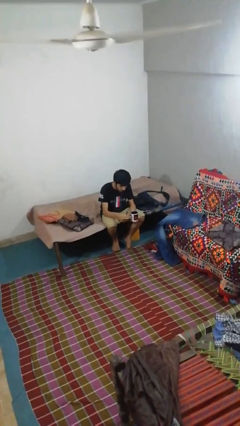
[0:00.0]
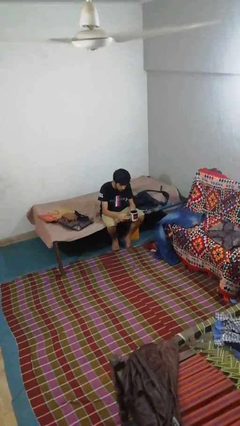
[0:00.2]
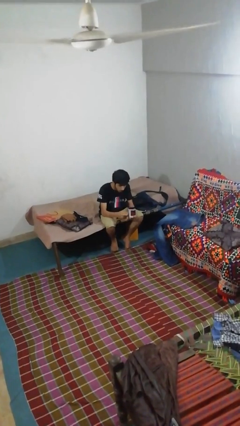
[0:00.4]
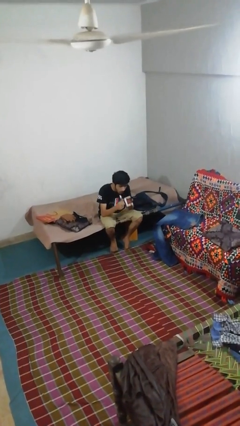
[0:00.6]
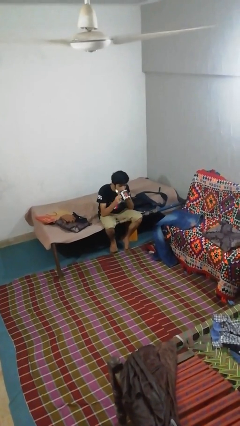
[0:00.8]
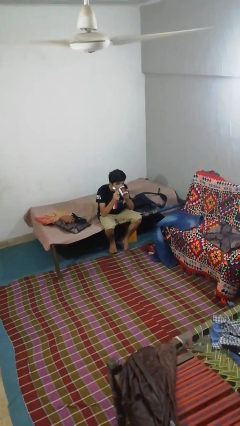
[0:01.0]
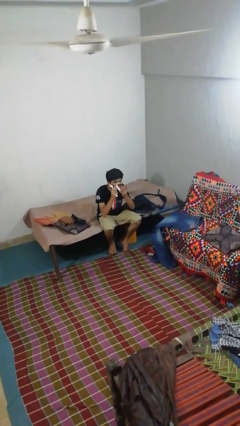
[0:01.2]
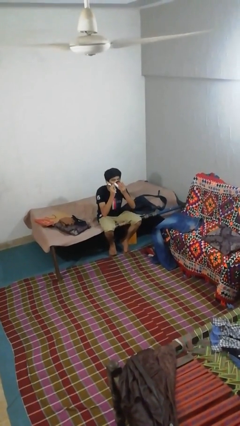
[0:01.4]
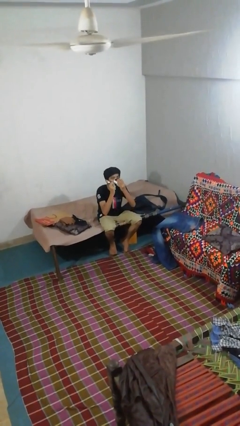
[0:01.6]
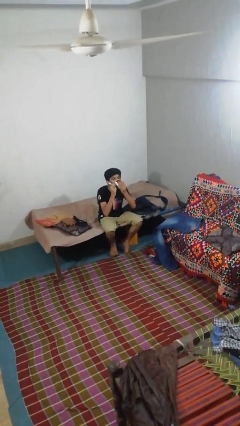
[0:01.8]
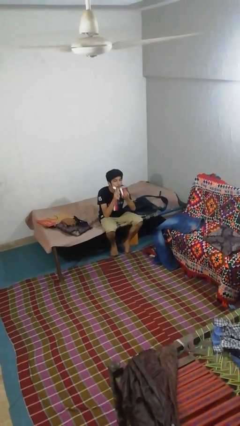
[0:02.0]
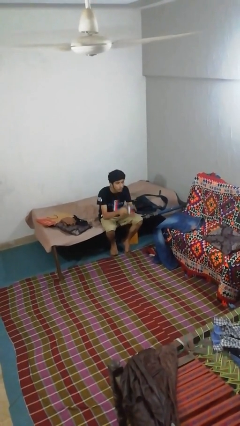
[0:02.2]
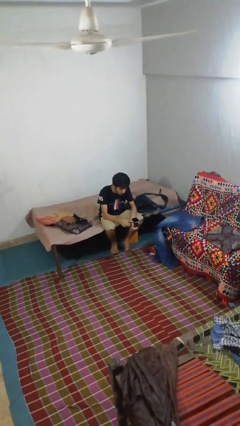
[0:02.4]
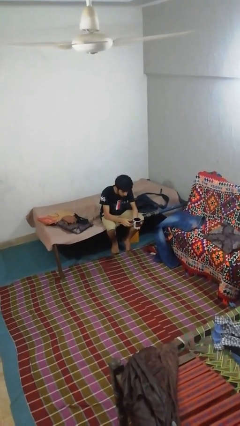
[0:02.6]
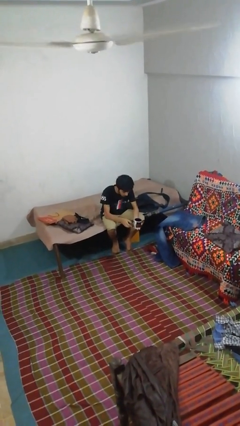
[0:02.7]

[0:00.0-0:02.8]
person drinks from mug

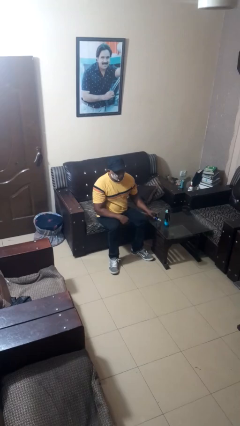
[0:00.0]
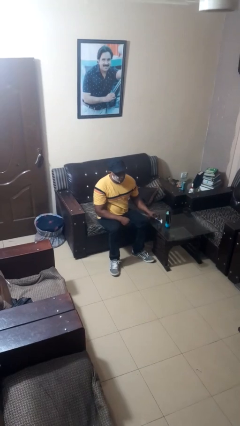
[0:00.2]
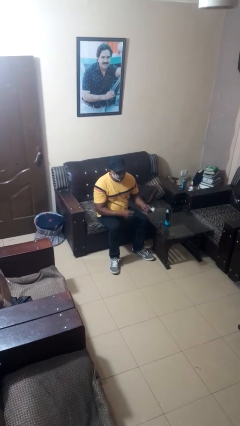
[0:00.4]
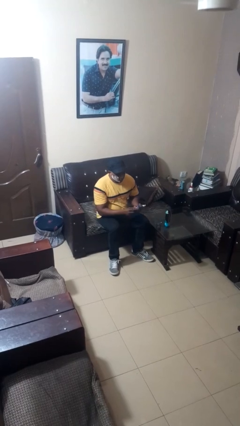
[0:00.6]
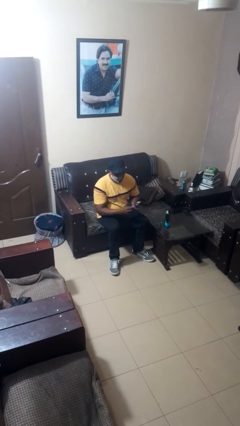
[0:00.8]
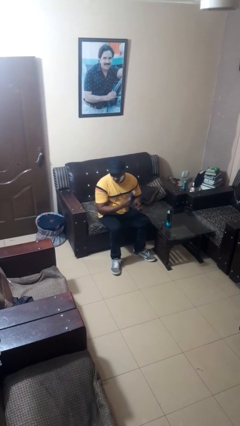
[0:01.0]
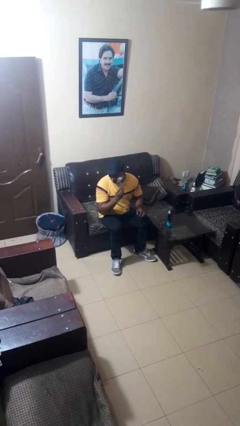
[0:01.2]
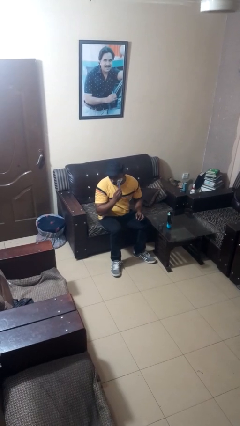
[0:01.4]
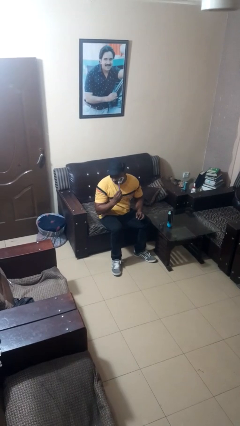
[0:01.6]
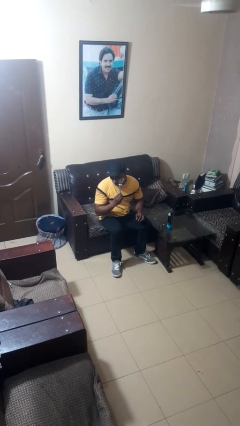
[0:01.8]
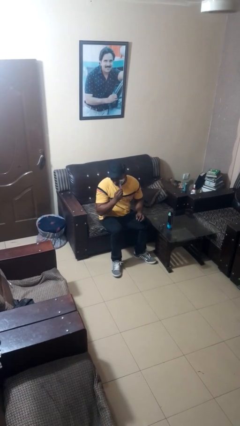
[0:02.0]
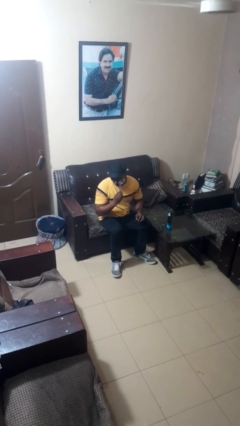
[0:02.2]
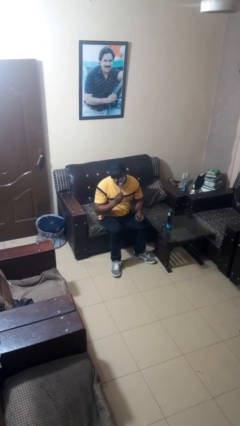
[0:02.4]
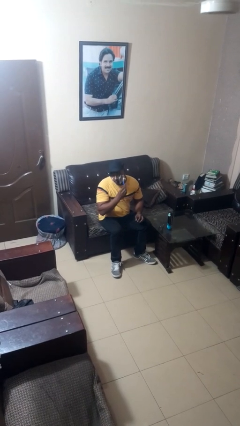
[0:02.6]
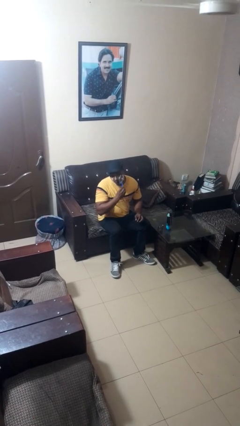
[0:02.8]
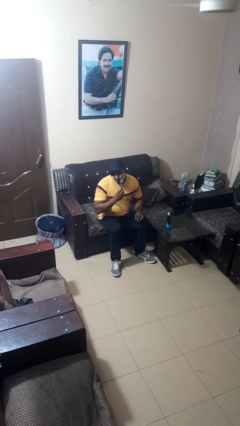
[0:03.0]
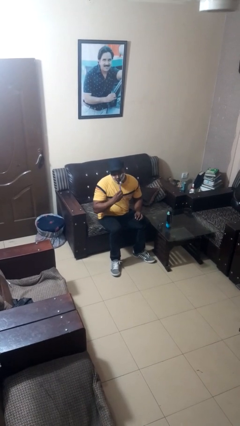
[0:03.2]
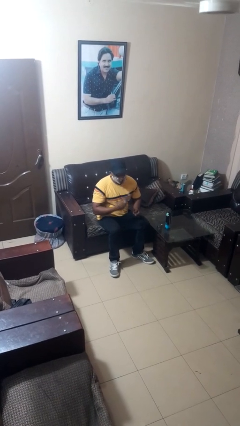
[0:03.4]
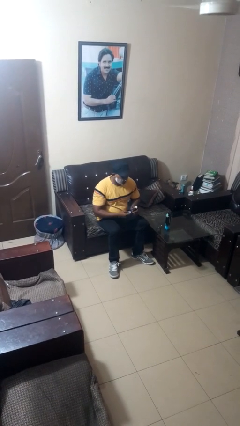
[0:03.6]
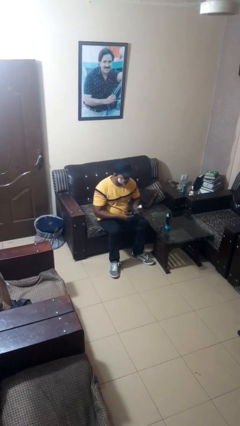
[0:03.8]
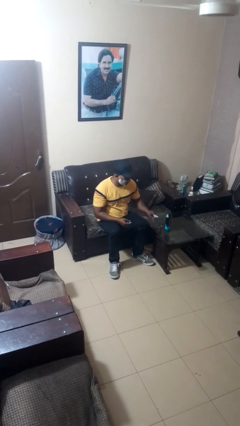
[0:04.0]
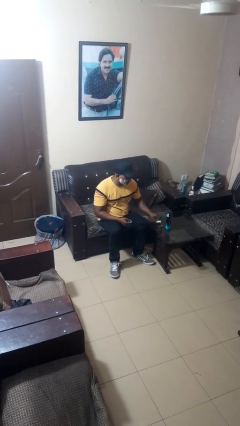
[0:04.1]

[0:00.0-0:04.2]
person shaves face

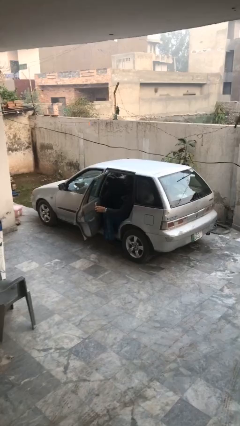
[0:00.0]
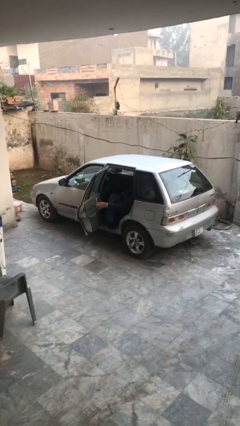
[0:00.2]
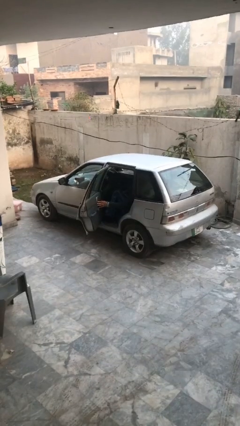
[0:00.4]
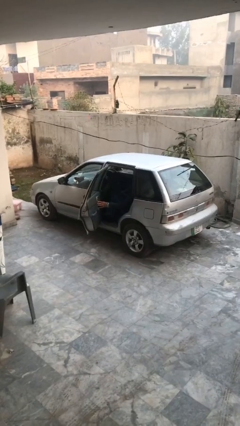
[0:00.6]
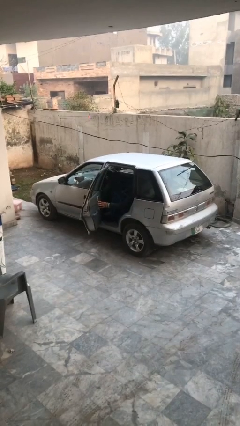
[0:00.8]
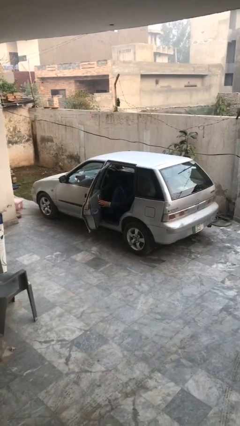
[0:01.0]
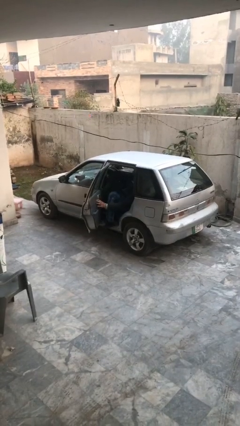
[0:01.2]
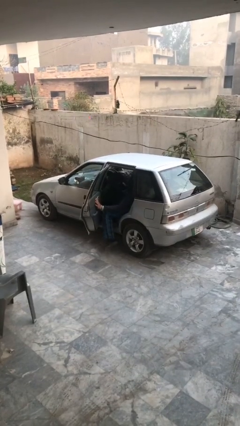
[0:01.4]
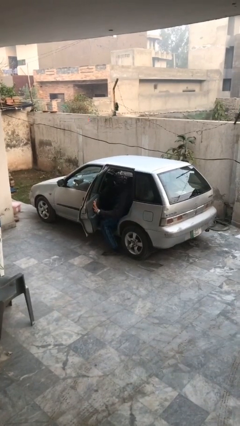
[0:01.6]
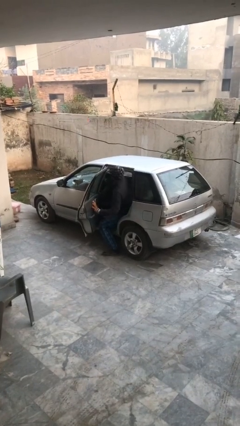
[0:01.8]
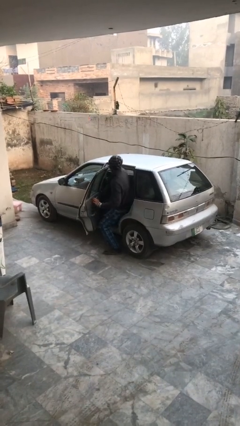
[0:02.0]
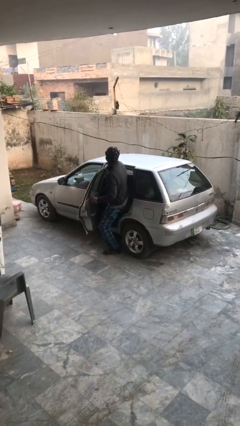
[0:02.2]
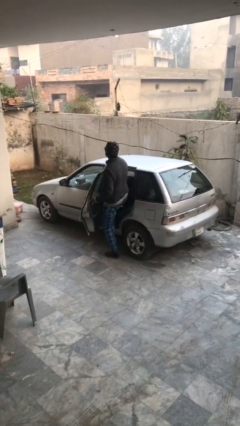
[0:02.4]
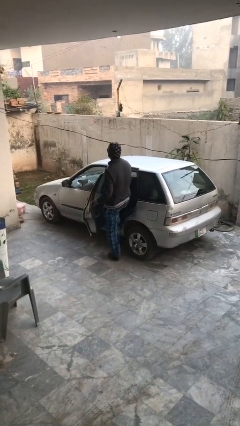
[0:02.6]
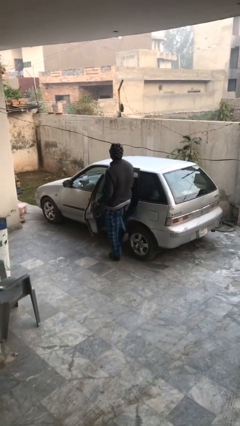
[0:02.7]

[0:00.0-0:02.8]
person exits car

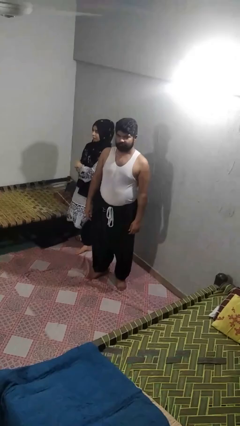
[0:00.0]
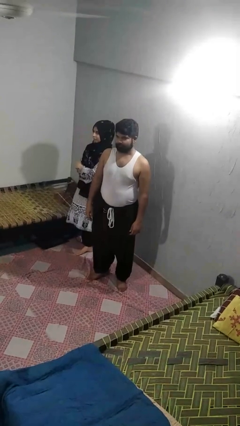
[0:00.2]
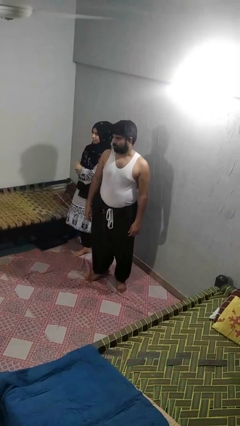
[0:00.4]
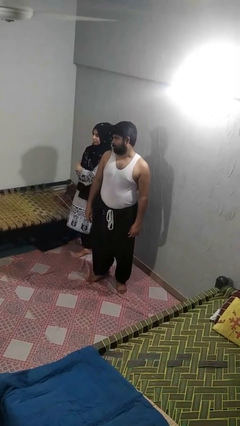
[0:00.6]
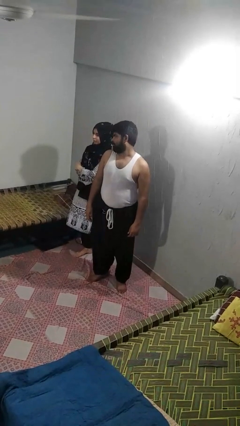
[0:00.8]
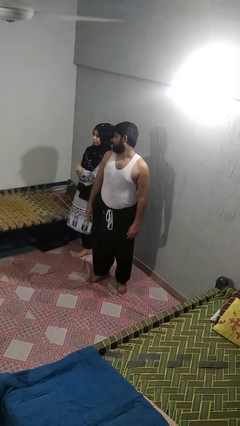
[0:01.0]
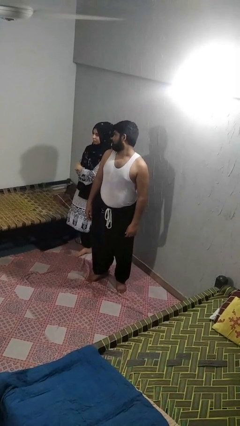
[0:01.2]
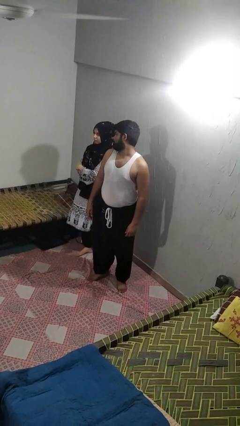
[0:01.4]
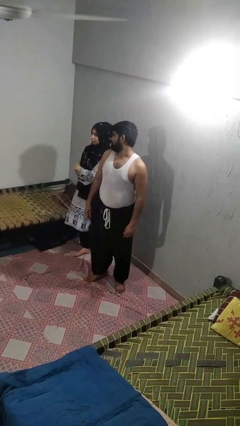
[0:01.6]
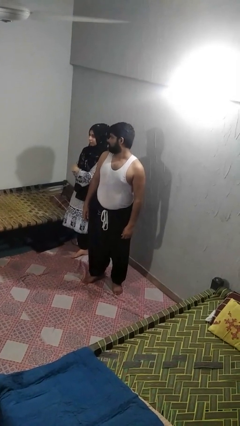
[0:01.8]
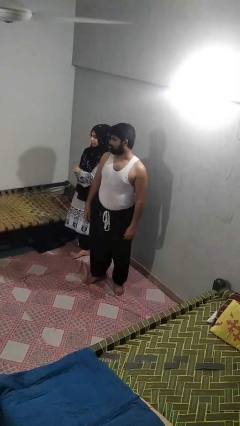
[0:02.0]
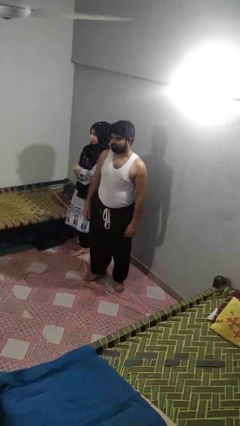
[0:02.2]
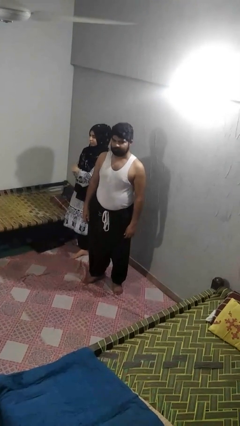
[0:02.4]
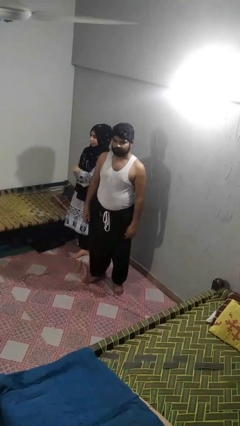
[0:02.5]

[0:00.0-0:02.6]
person looks over shoulder

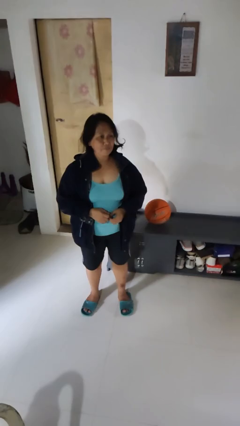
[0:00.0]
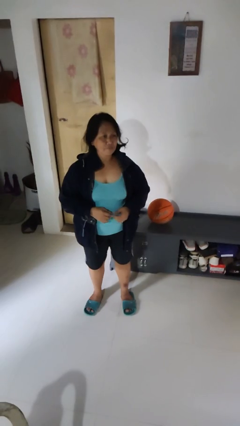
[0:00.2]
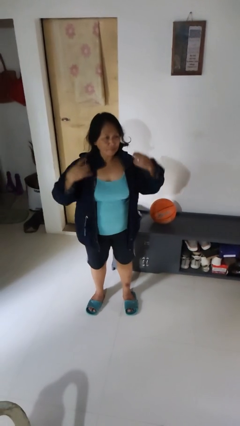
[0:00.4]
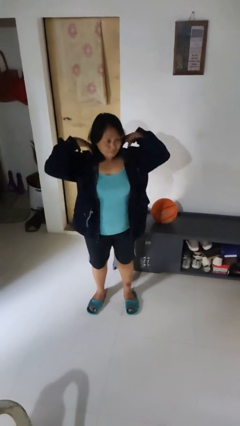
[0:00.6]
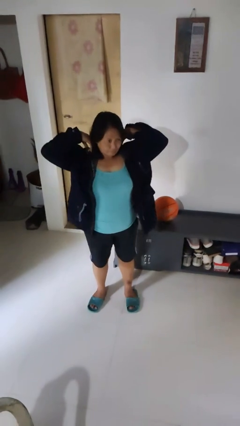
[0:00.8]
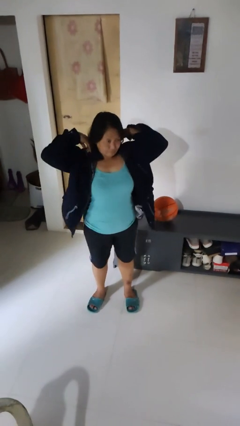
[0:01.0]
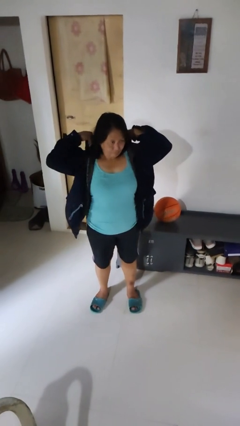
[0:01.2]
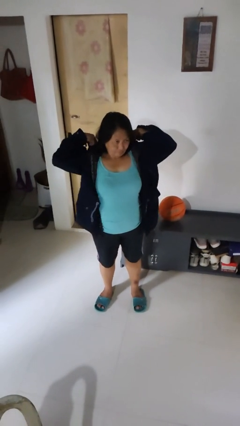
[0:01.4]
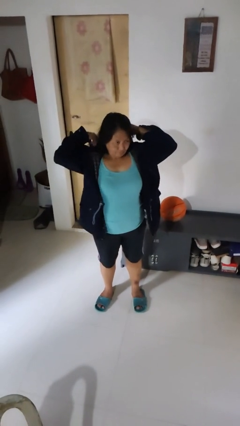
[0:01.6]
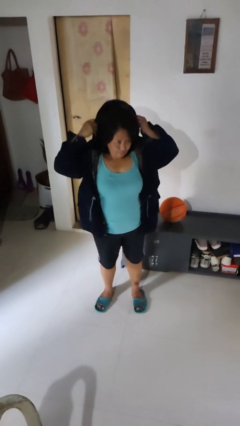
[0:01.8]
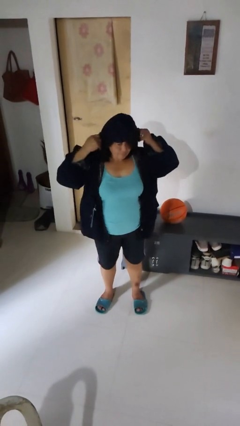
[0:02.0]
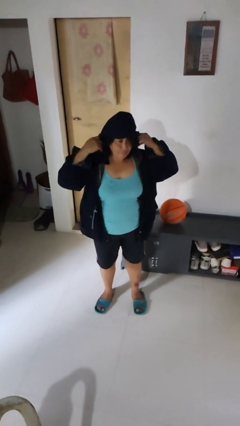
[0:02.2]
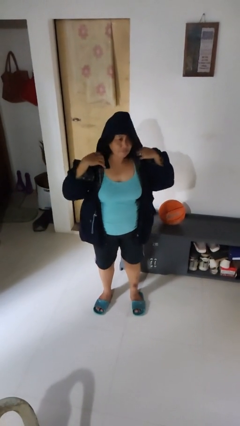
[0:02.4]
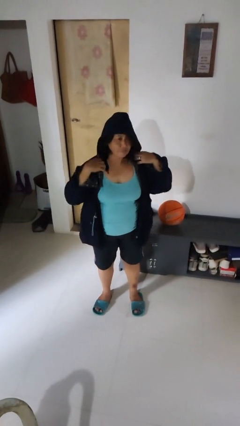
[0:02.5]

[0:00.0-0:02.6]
person puts on hoodie

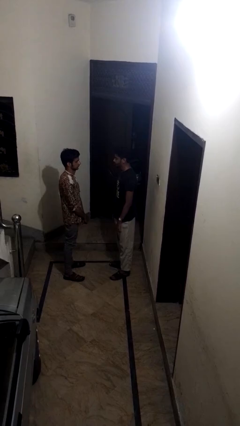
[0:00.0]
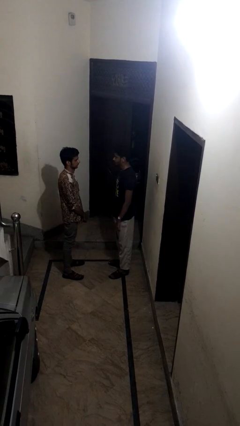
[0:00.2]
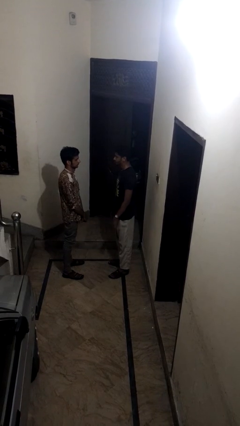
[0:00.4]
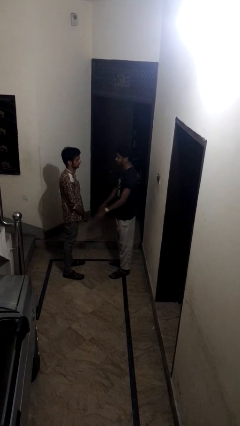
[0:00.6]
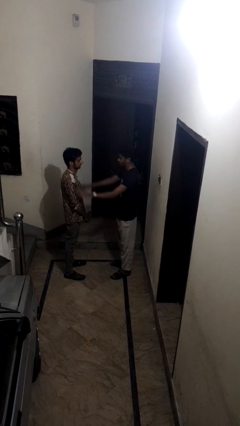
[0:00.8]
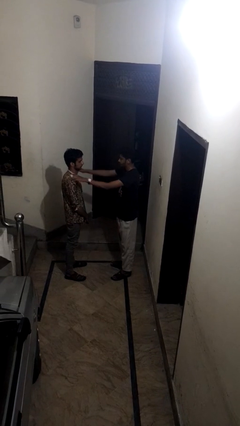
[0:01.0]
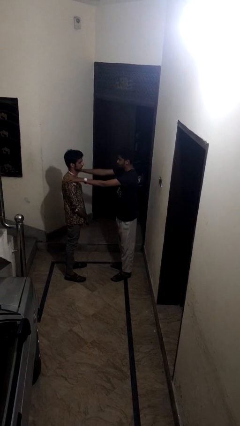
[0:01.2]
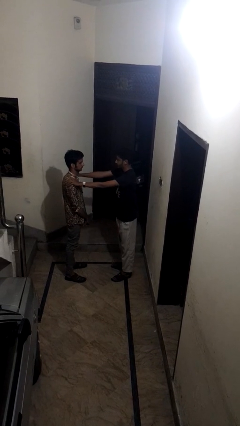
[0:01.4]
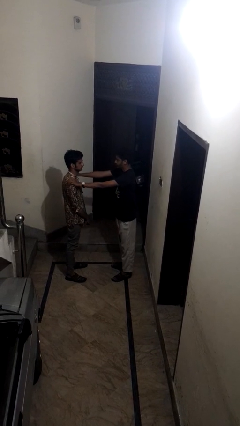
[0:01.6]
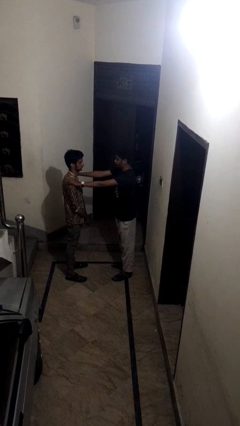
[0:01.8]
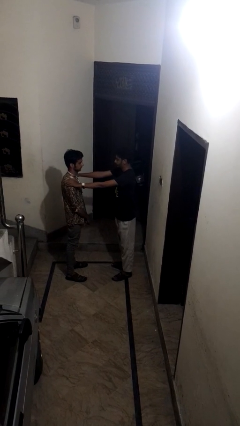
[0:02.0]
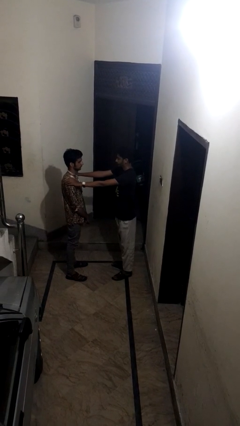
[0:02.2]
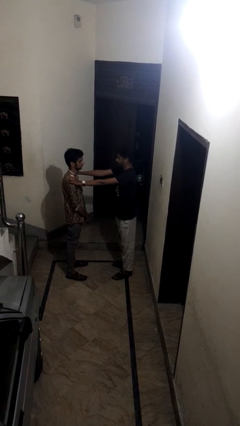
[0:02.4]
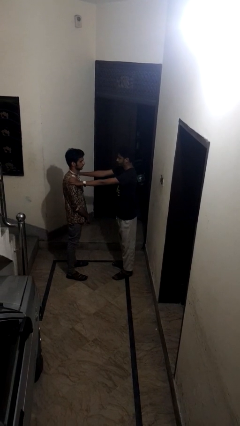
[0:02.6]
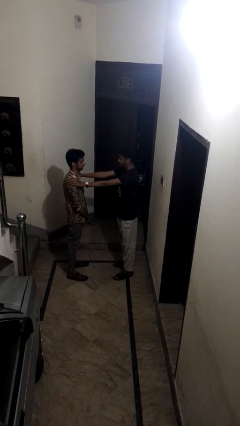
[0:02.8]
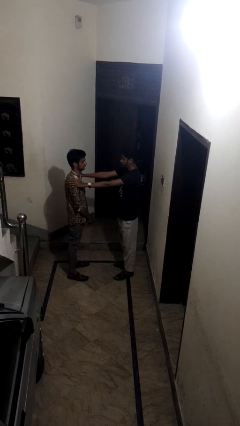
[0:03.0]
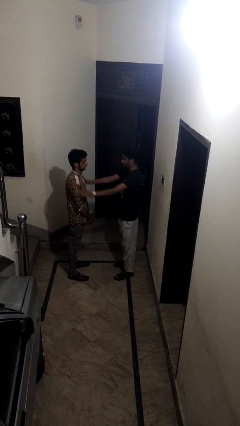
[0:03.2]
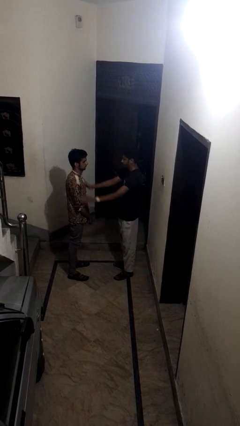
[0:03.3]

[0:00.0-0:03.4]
person pounds shoulders of person
